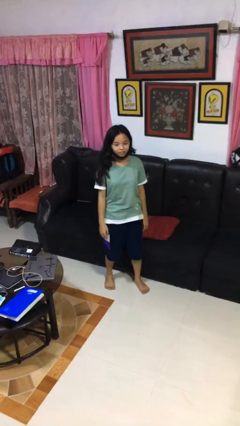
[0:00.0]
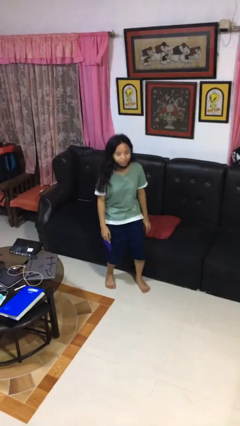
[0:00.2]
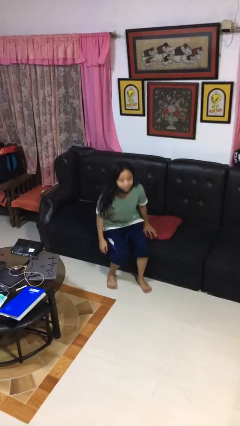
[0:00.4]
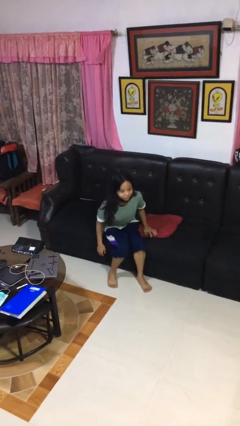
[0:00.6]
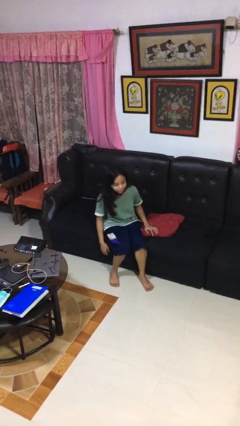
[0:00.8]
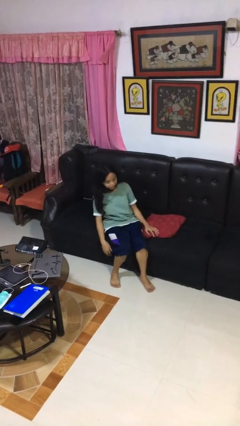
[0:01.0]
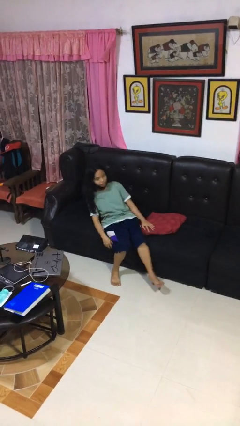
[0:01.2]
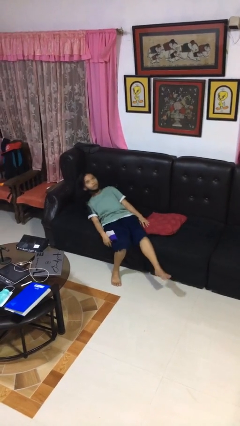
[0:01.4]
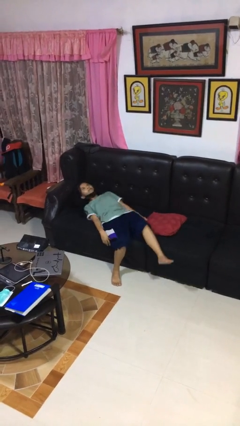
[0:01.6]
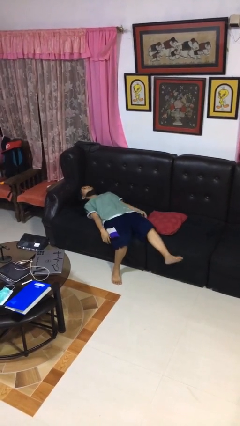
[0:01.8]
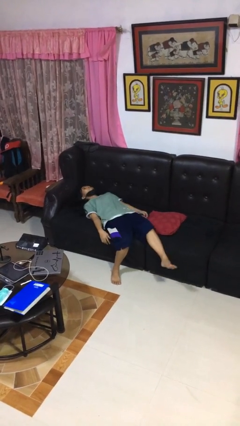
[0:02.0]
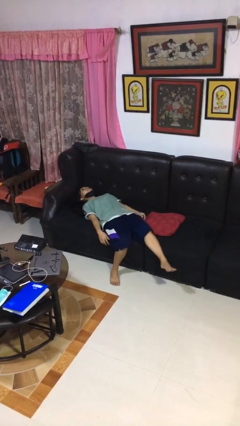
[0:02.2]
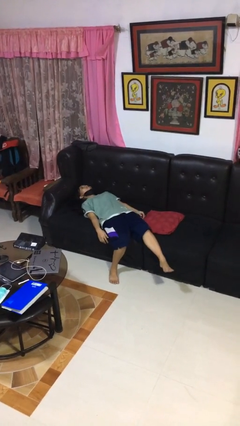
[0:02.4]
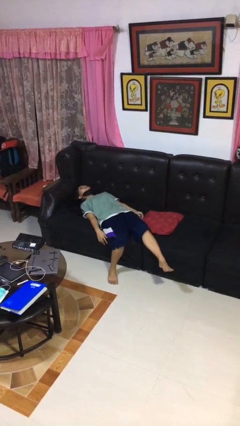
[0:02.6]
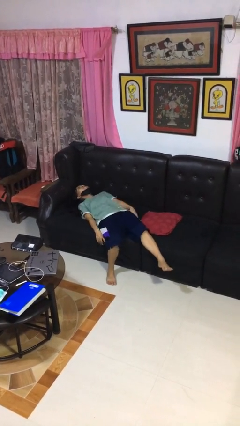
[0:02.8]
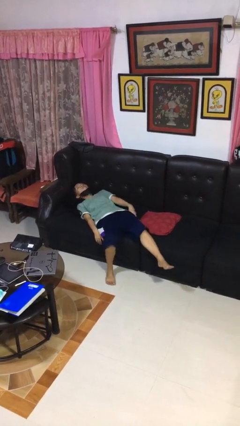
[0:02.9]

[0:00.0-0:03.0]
person lies down on couch

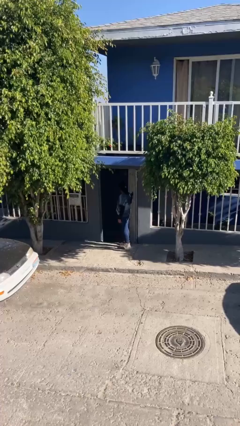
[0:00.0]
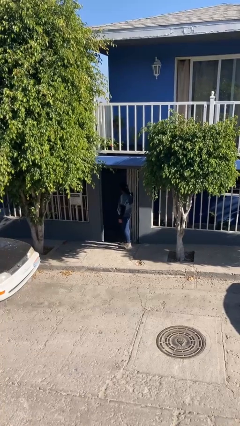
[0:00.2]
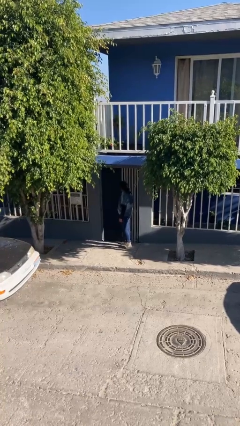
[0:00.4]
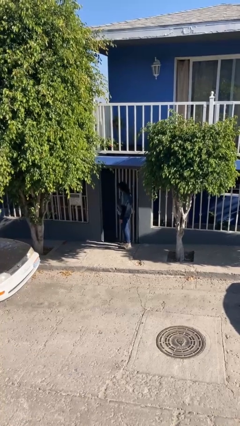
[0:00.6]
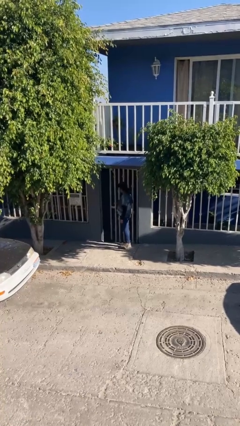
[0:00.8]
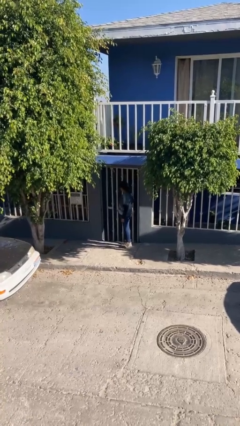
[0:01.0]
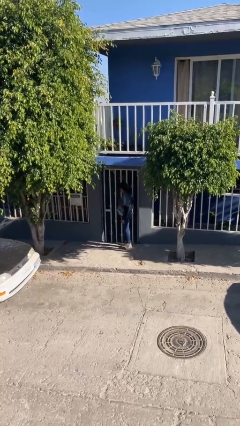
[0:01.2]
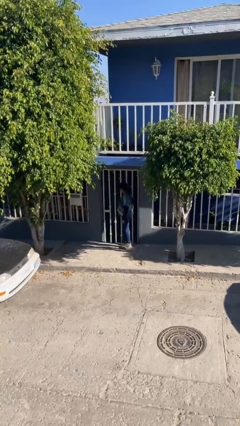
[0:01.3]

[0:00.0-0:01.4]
person closes facility door

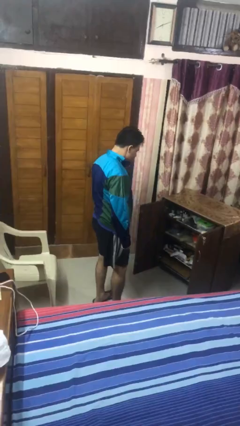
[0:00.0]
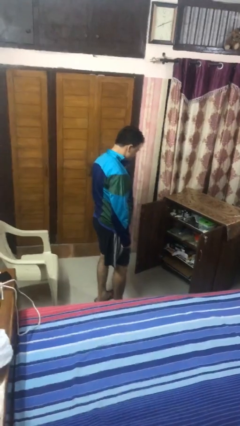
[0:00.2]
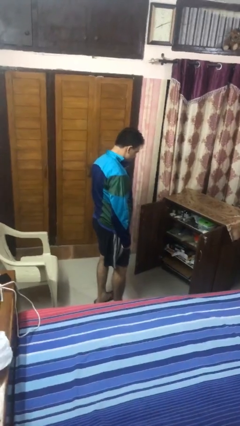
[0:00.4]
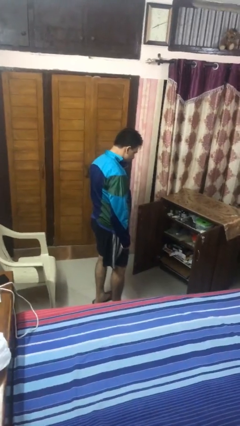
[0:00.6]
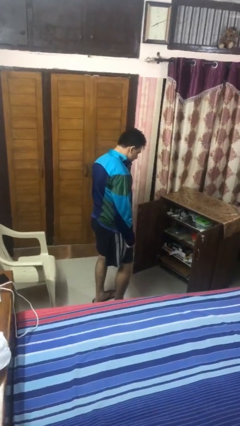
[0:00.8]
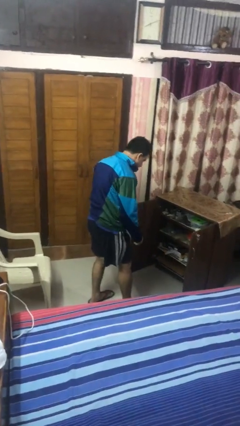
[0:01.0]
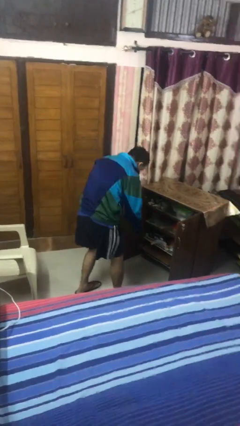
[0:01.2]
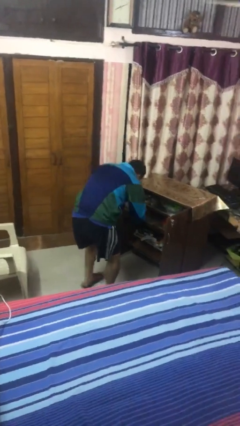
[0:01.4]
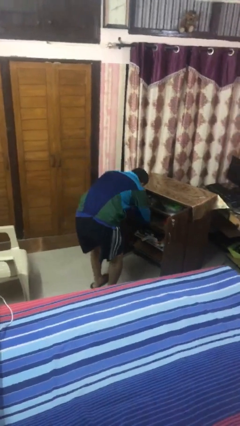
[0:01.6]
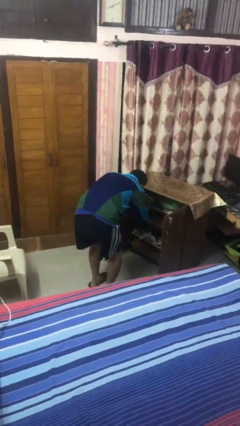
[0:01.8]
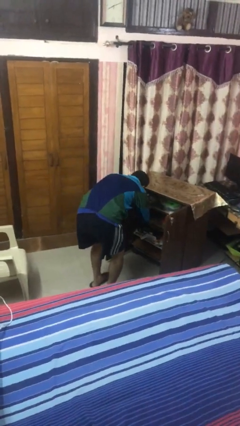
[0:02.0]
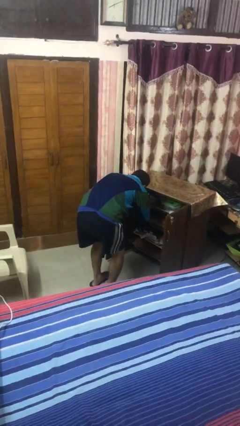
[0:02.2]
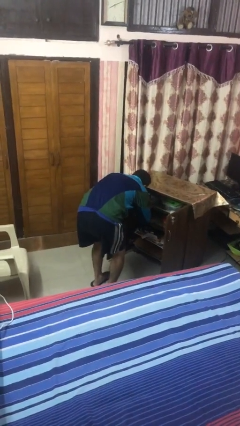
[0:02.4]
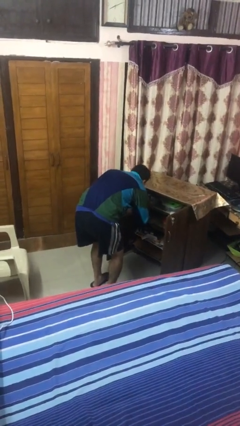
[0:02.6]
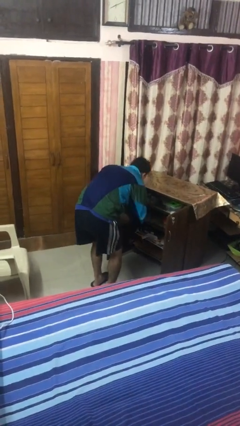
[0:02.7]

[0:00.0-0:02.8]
person searches in cabinet

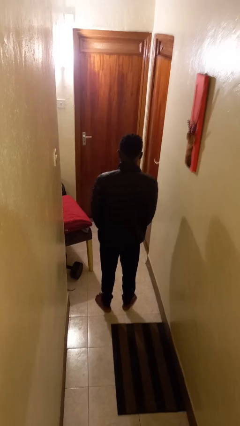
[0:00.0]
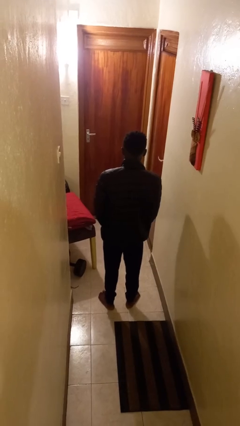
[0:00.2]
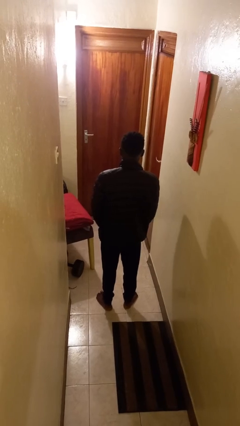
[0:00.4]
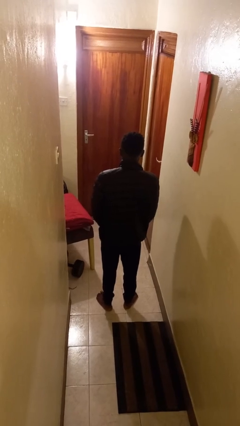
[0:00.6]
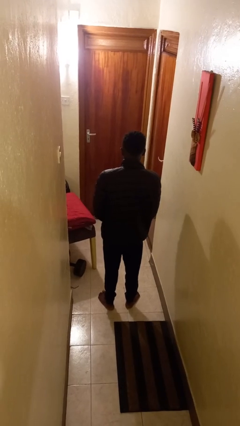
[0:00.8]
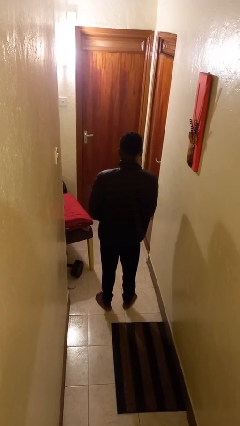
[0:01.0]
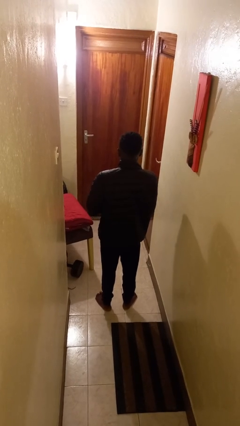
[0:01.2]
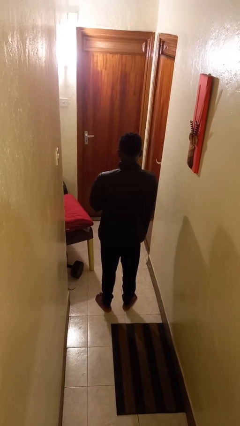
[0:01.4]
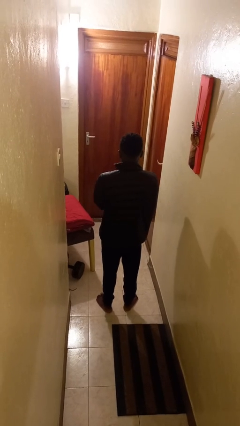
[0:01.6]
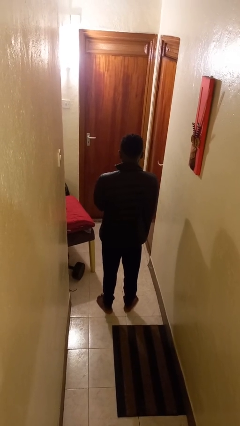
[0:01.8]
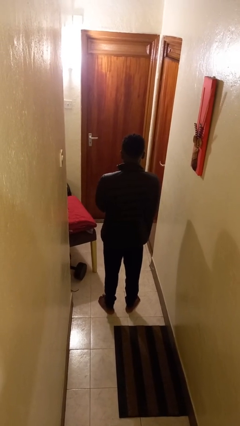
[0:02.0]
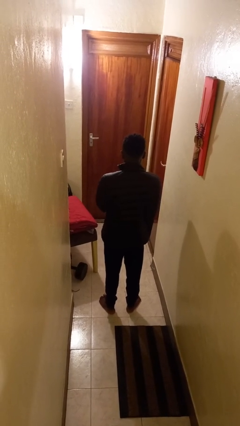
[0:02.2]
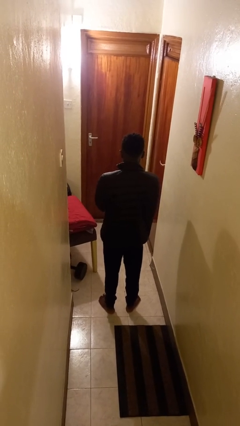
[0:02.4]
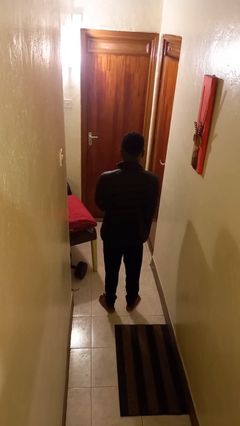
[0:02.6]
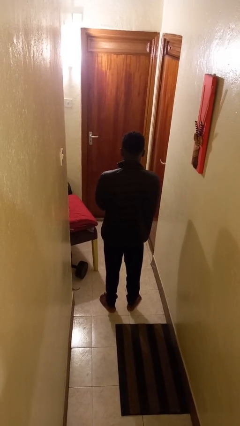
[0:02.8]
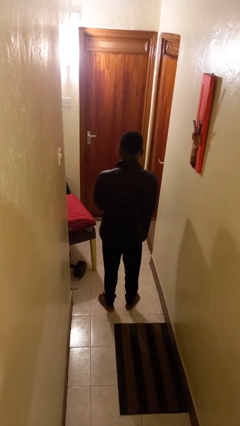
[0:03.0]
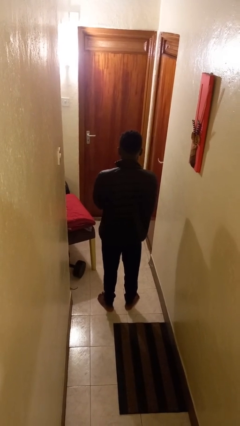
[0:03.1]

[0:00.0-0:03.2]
person zips up jacket

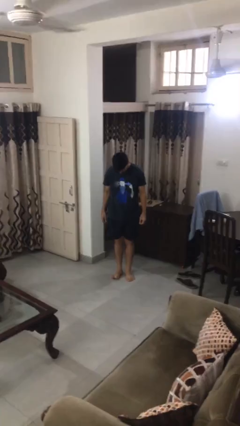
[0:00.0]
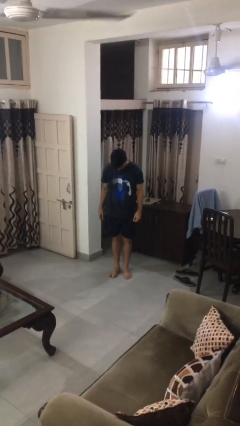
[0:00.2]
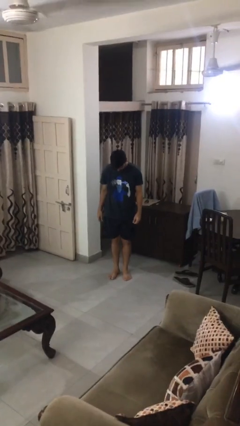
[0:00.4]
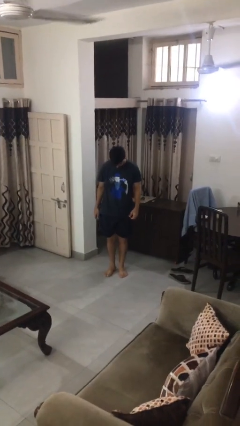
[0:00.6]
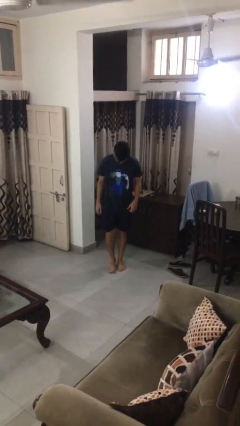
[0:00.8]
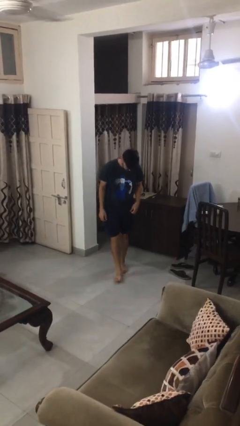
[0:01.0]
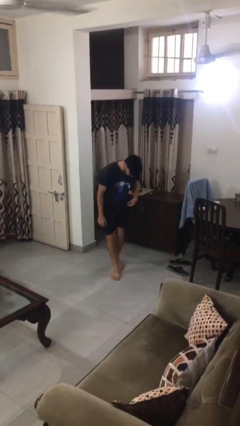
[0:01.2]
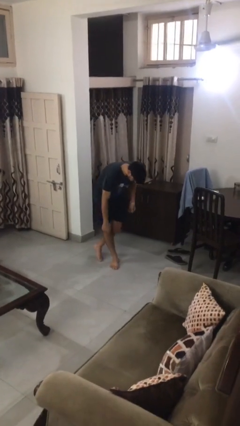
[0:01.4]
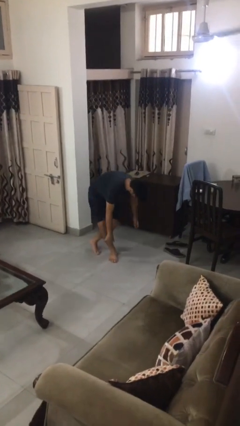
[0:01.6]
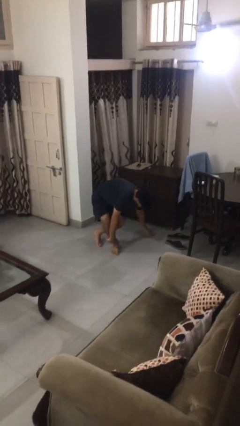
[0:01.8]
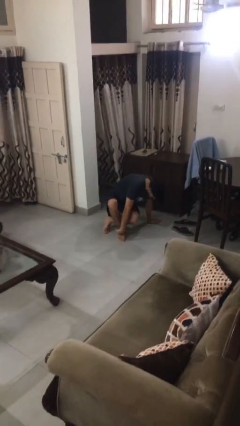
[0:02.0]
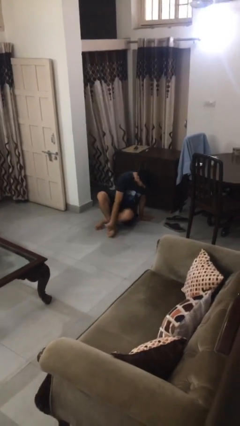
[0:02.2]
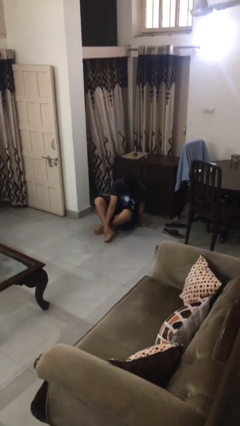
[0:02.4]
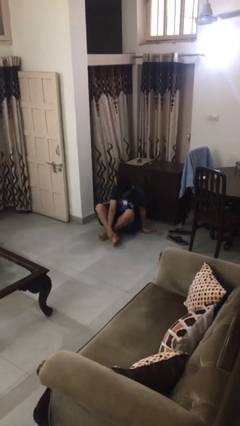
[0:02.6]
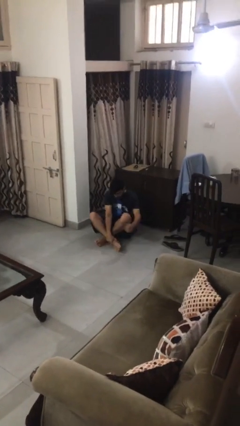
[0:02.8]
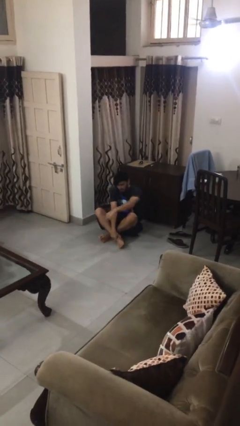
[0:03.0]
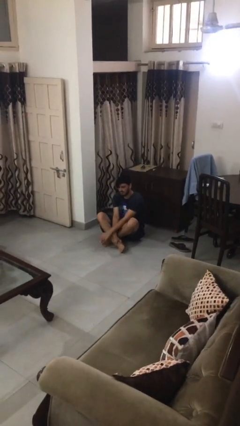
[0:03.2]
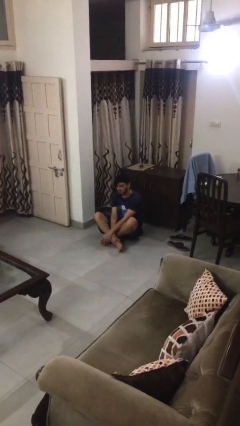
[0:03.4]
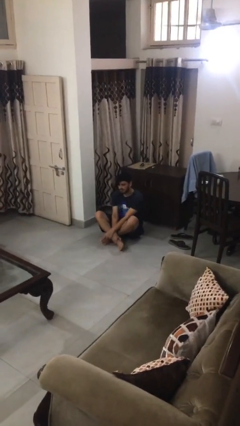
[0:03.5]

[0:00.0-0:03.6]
person sits crisscross

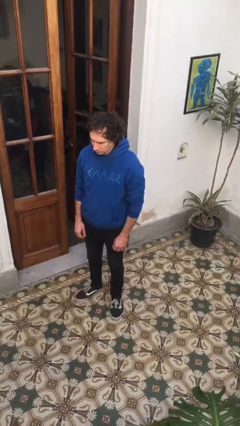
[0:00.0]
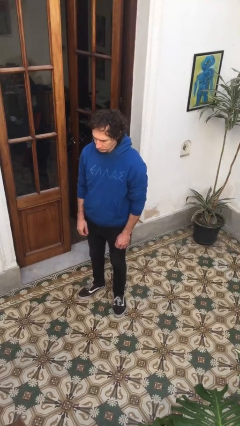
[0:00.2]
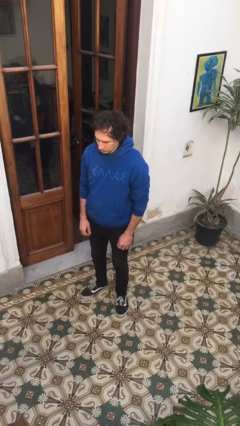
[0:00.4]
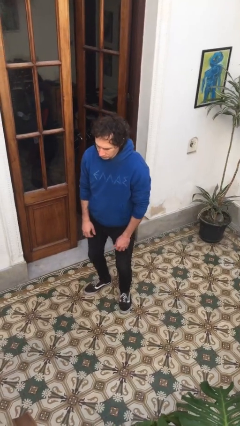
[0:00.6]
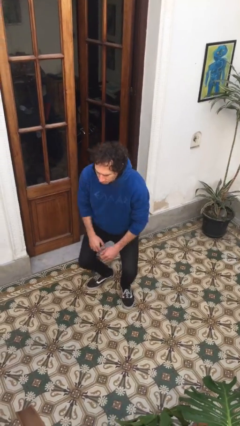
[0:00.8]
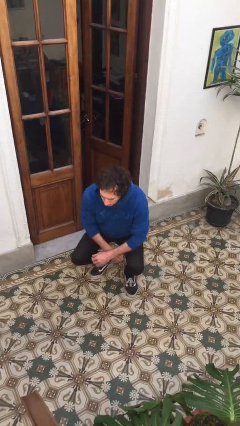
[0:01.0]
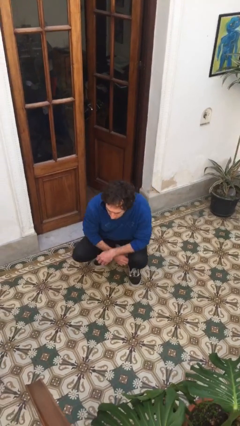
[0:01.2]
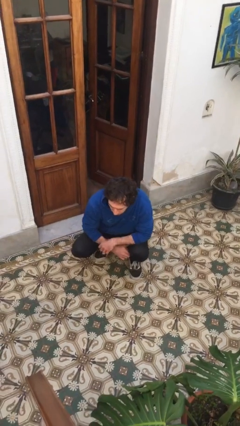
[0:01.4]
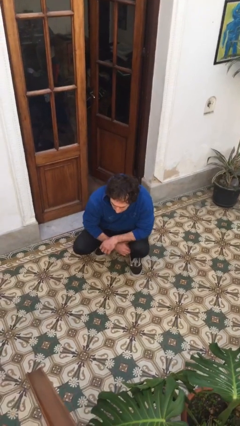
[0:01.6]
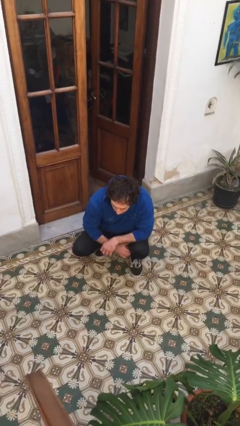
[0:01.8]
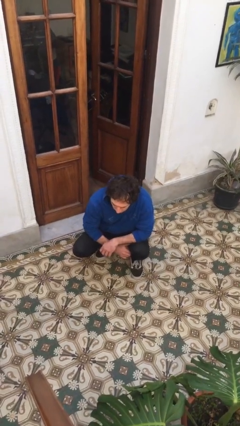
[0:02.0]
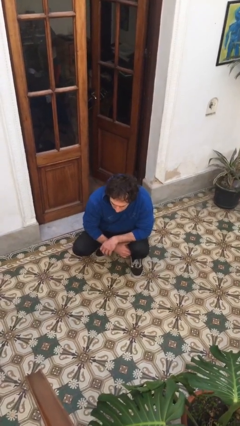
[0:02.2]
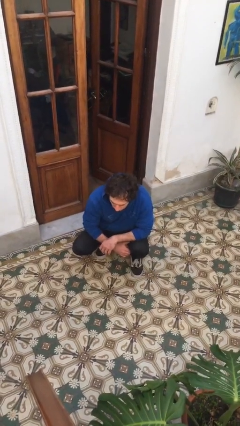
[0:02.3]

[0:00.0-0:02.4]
person squats

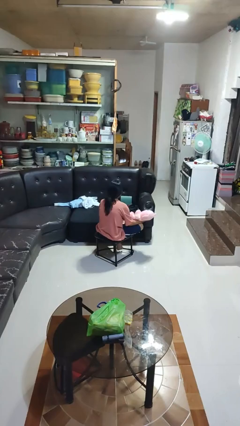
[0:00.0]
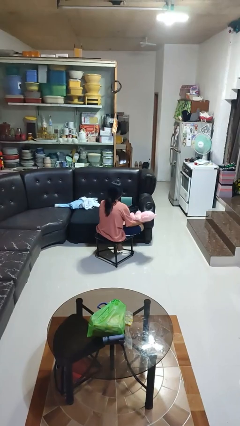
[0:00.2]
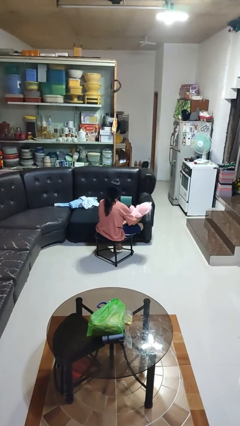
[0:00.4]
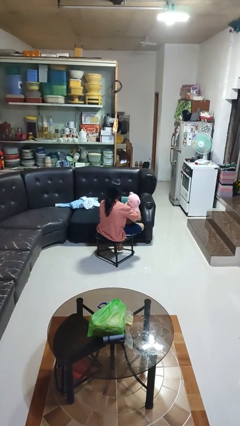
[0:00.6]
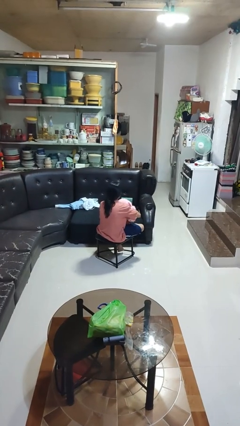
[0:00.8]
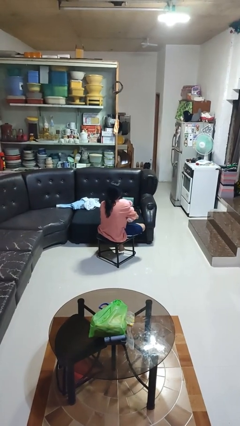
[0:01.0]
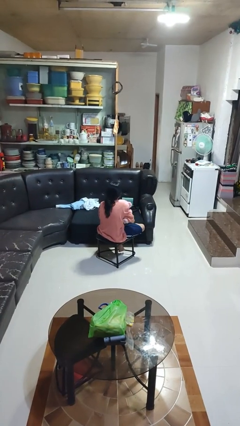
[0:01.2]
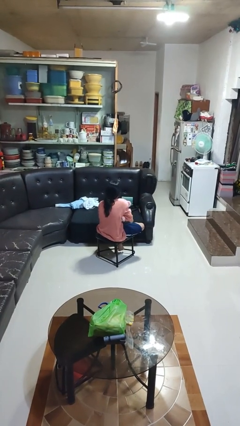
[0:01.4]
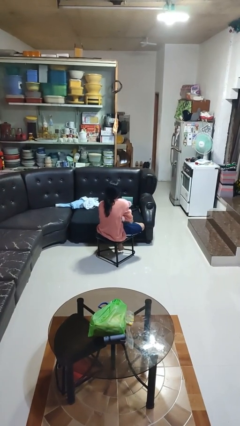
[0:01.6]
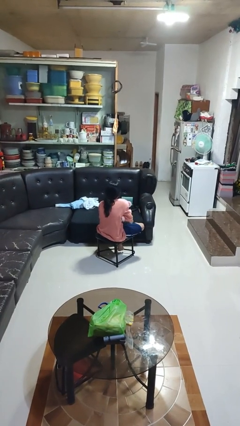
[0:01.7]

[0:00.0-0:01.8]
person hugs stuffed animal
